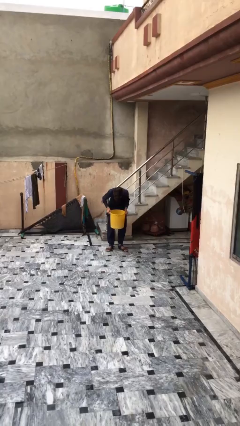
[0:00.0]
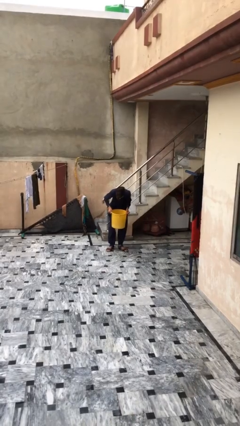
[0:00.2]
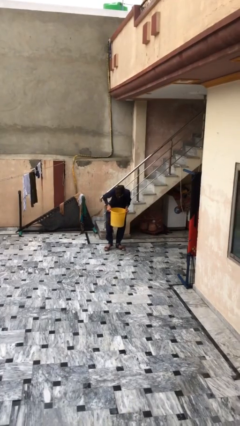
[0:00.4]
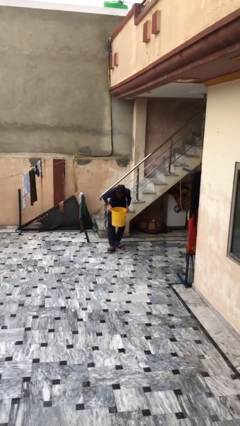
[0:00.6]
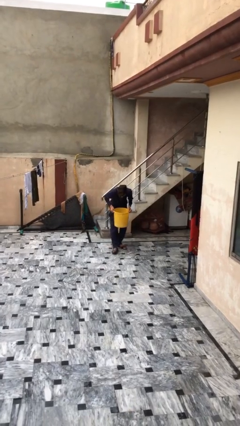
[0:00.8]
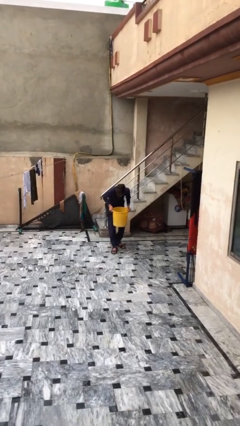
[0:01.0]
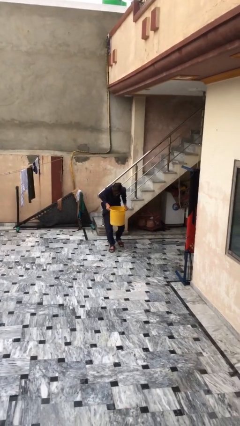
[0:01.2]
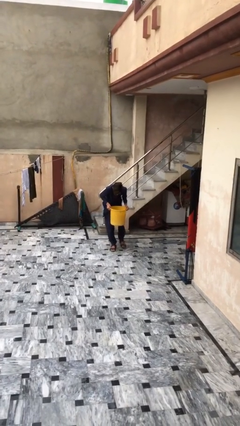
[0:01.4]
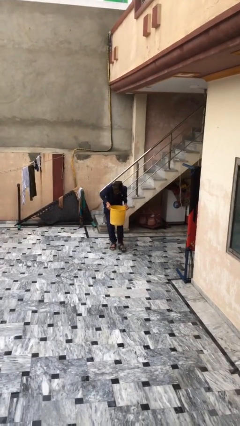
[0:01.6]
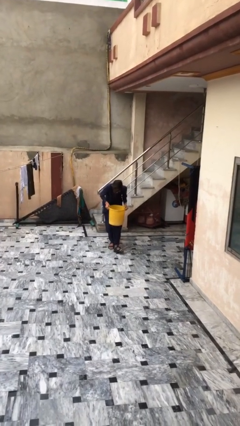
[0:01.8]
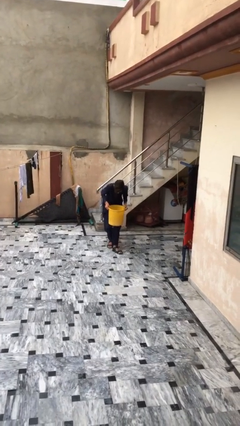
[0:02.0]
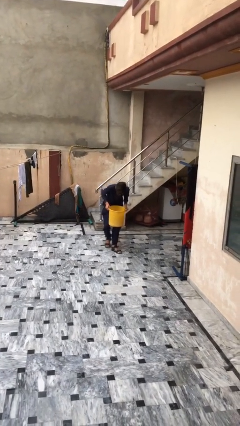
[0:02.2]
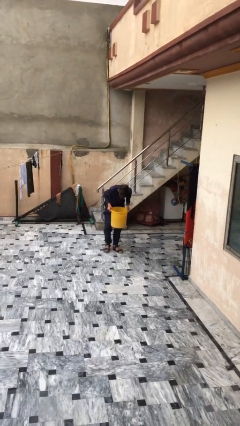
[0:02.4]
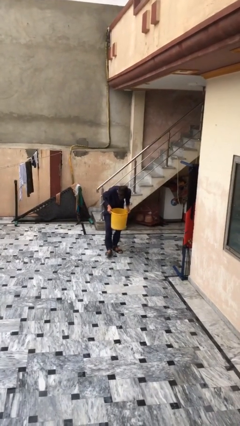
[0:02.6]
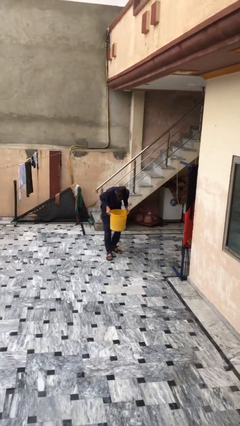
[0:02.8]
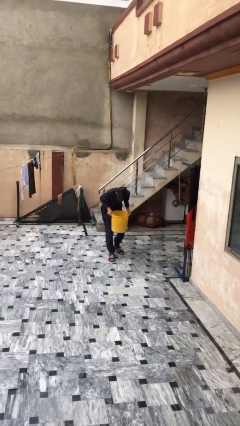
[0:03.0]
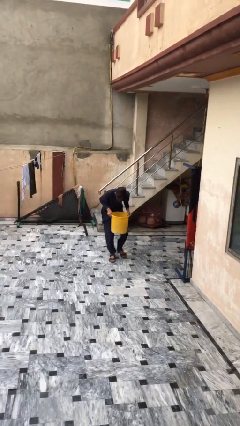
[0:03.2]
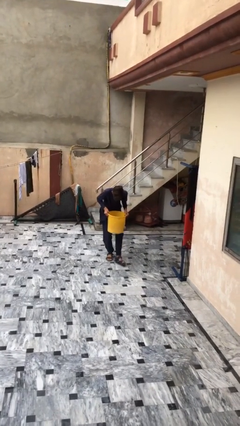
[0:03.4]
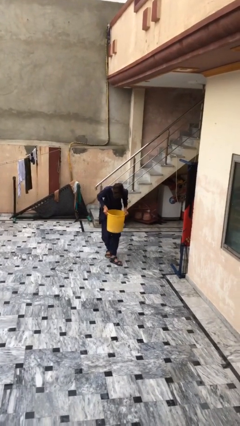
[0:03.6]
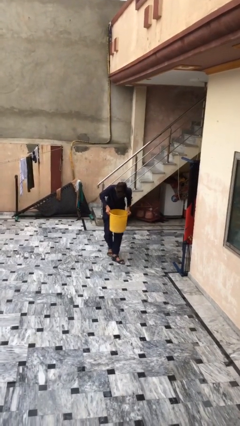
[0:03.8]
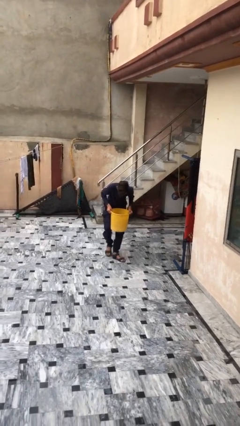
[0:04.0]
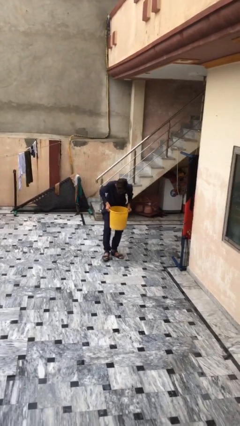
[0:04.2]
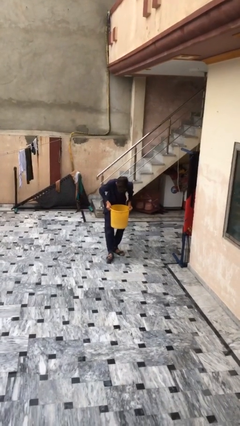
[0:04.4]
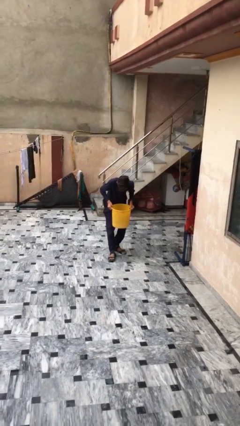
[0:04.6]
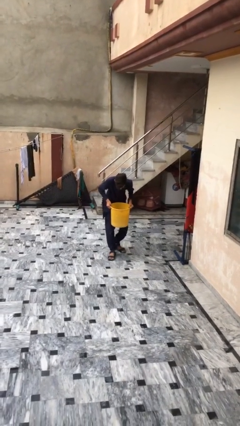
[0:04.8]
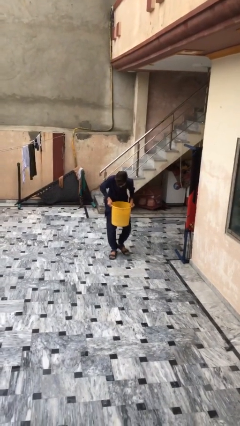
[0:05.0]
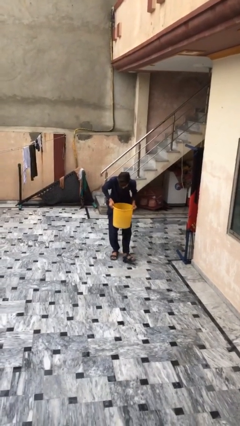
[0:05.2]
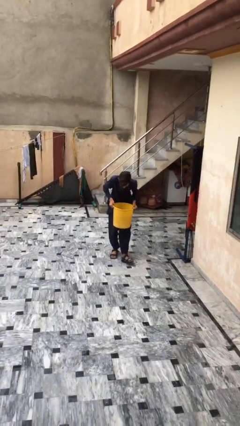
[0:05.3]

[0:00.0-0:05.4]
person carries heavy object

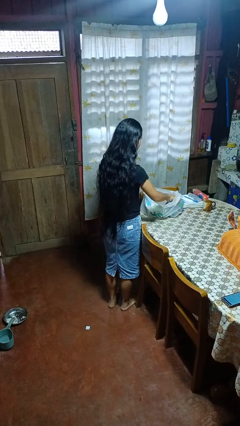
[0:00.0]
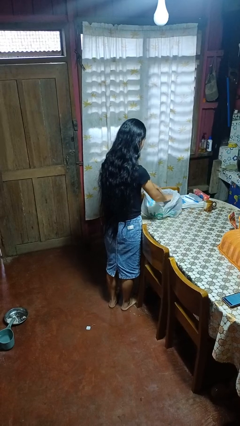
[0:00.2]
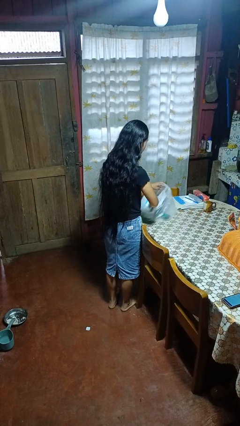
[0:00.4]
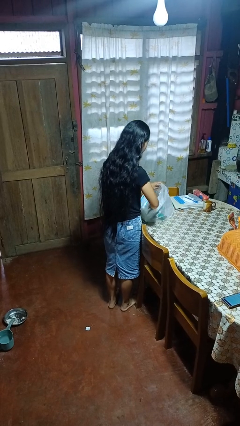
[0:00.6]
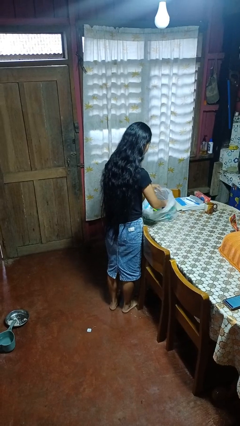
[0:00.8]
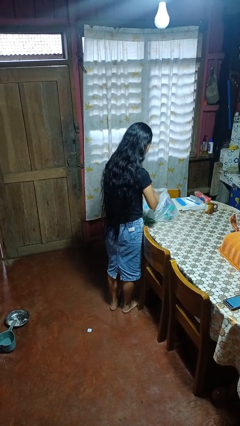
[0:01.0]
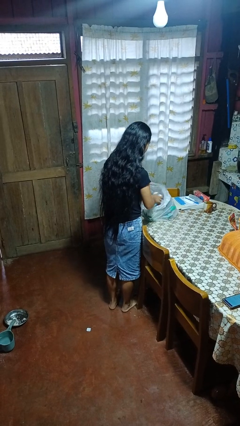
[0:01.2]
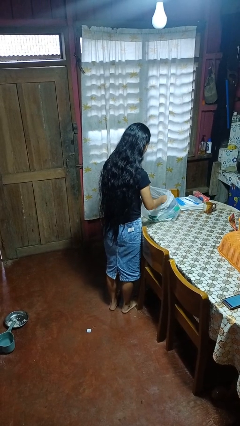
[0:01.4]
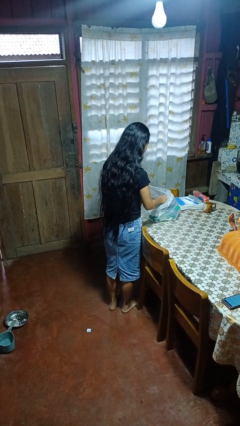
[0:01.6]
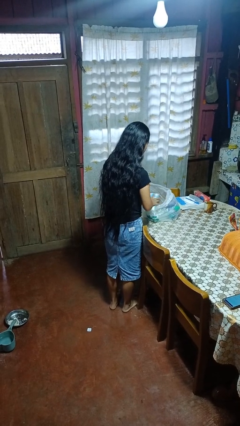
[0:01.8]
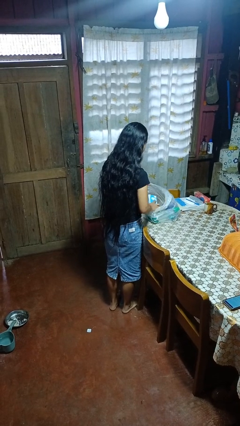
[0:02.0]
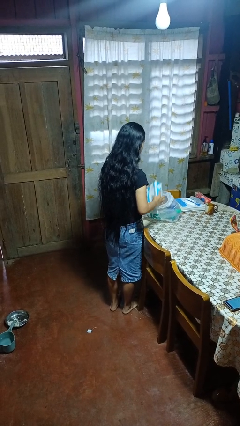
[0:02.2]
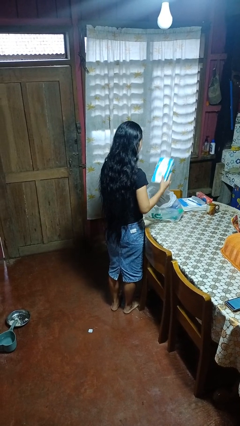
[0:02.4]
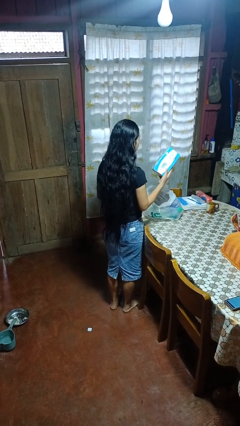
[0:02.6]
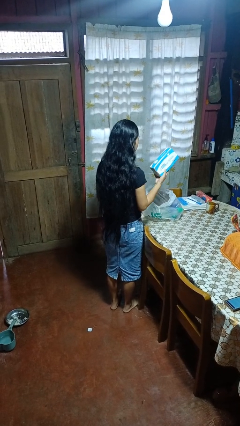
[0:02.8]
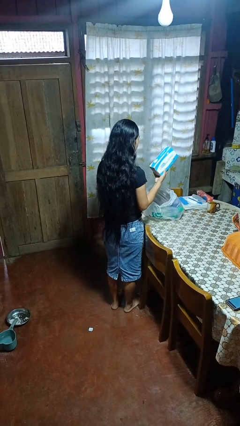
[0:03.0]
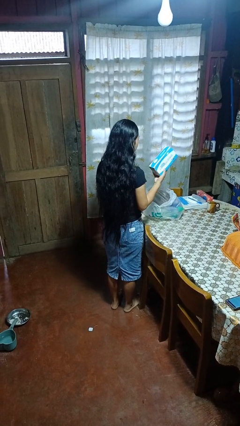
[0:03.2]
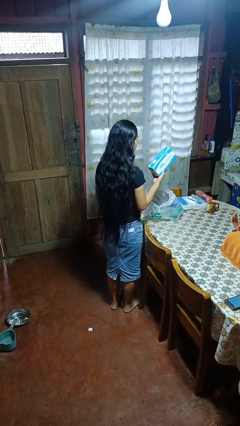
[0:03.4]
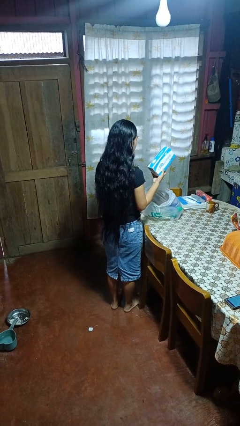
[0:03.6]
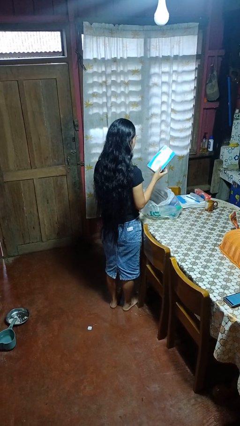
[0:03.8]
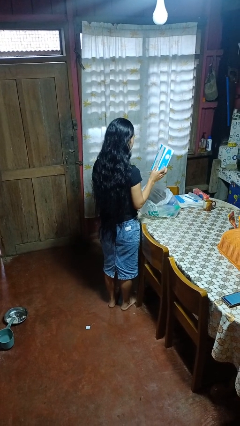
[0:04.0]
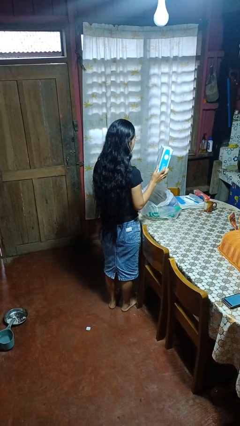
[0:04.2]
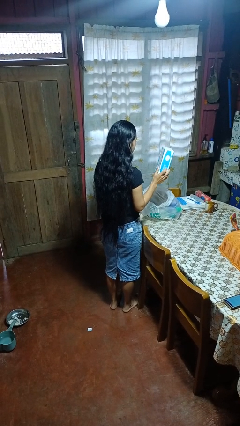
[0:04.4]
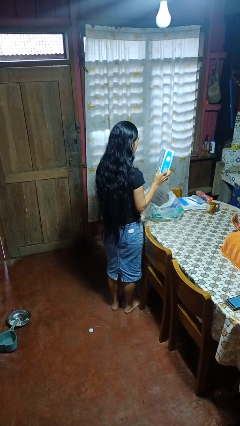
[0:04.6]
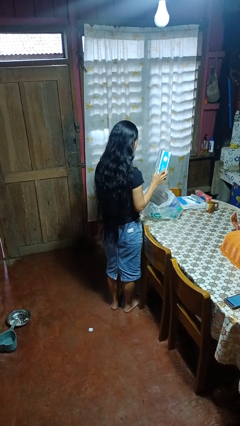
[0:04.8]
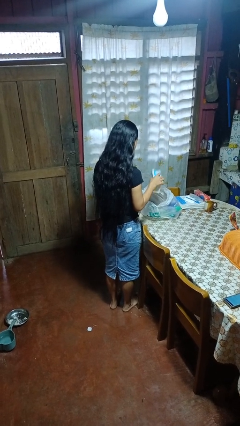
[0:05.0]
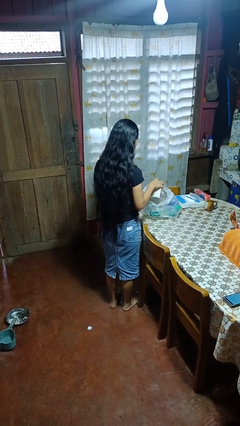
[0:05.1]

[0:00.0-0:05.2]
person takes object from bag

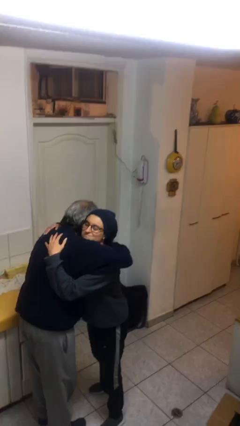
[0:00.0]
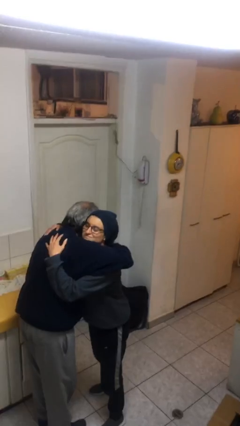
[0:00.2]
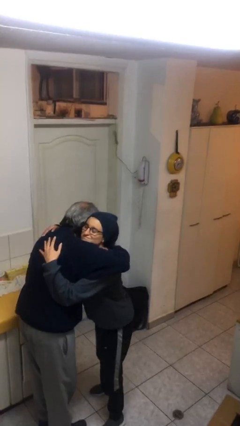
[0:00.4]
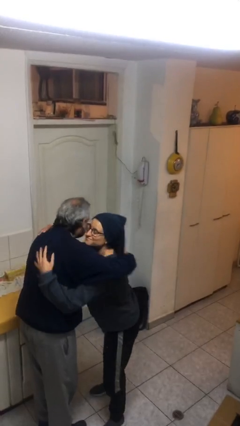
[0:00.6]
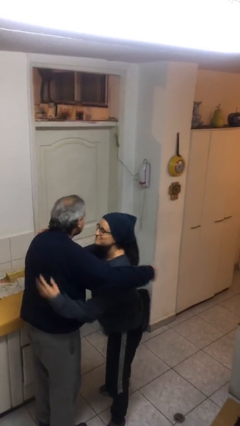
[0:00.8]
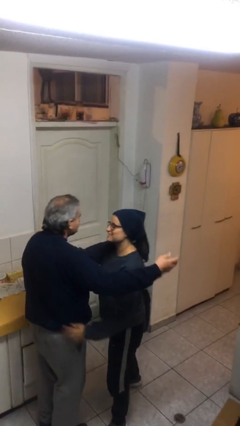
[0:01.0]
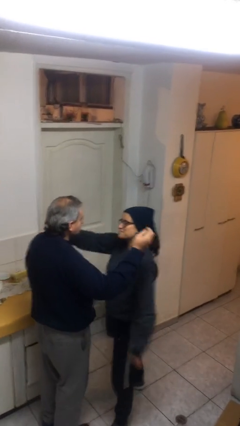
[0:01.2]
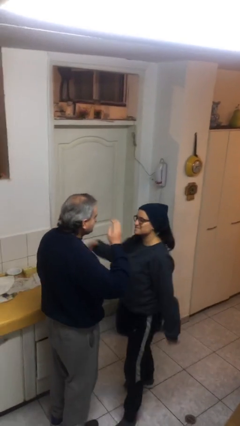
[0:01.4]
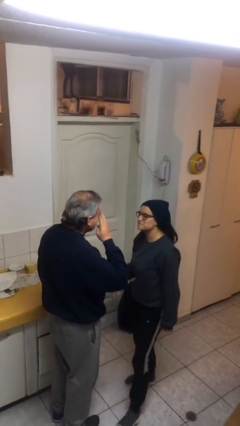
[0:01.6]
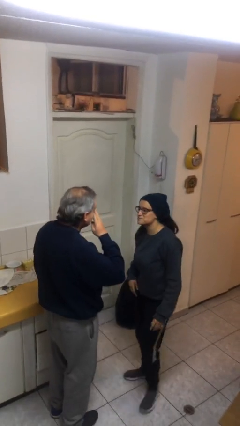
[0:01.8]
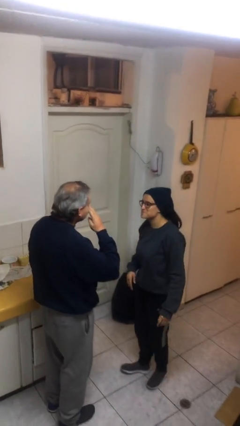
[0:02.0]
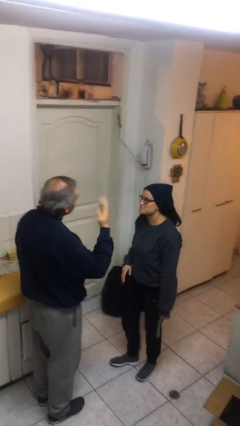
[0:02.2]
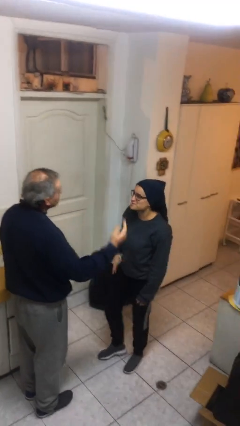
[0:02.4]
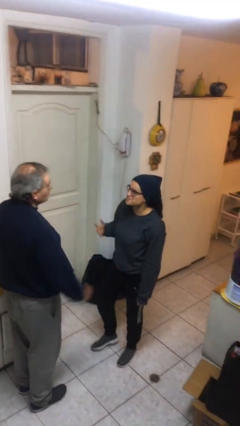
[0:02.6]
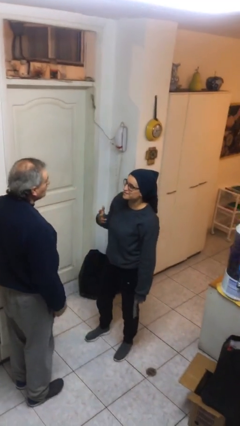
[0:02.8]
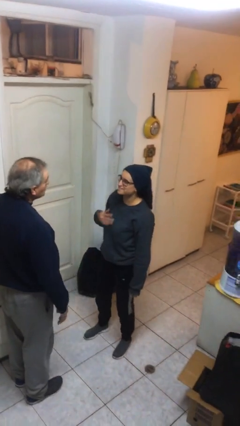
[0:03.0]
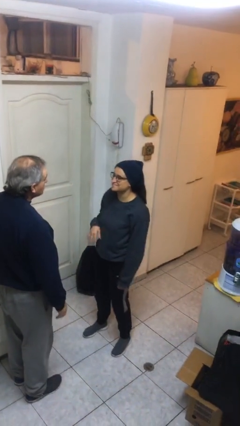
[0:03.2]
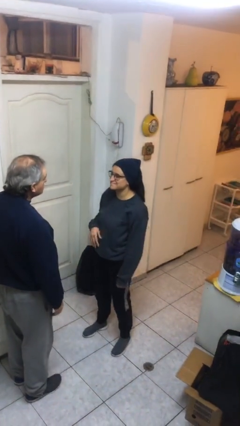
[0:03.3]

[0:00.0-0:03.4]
person embraces person

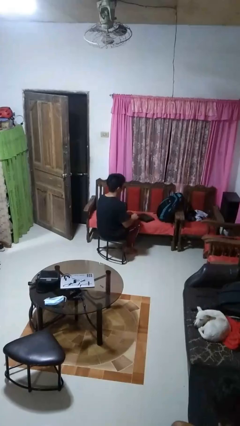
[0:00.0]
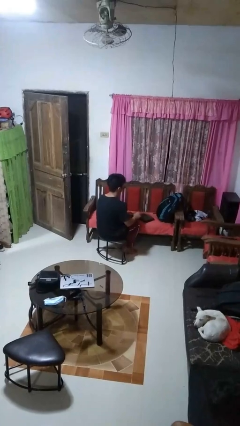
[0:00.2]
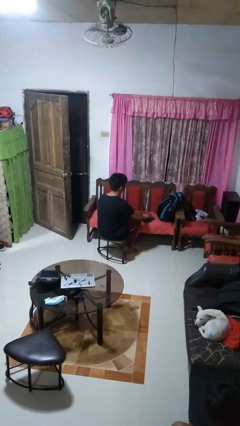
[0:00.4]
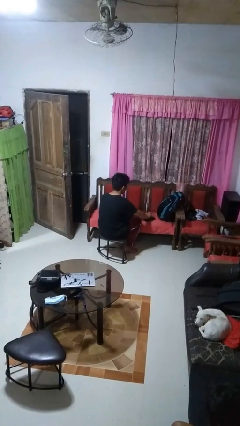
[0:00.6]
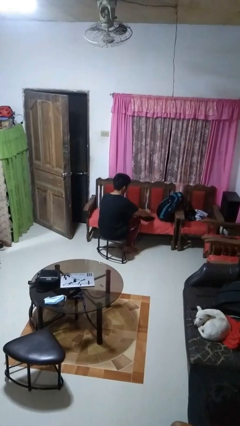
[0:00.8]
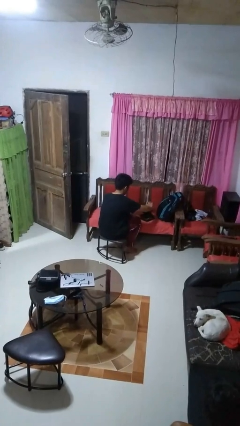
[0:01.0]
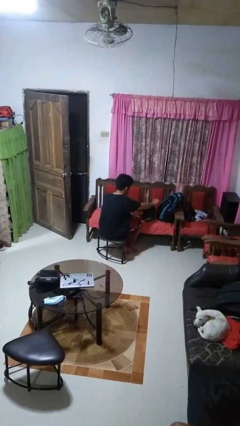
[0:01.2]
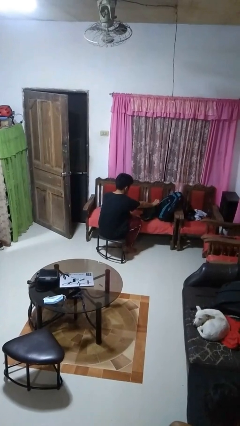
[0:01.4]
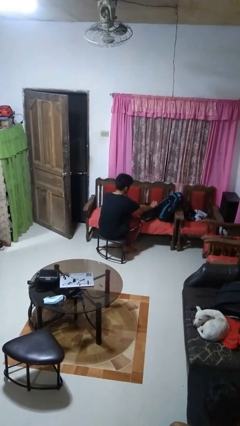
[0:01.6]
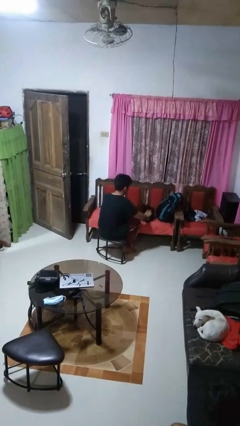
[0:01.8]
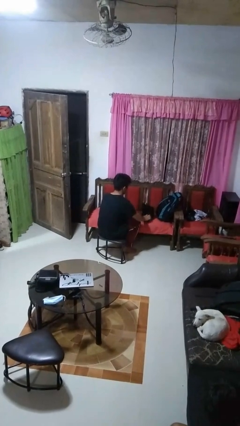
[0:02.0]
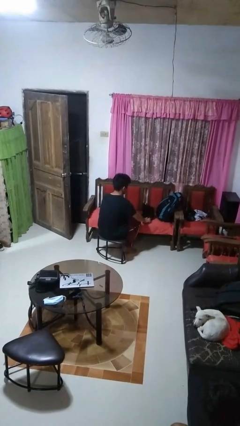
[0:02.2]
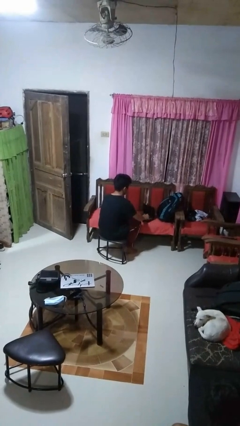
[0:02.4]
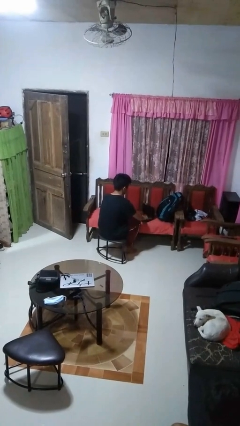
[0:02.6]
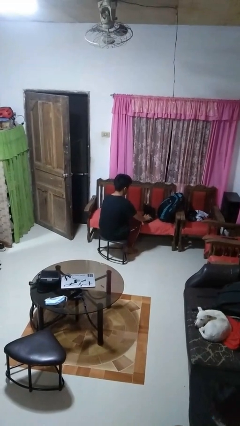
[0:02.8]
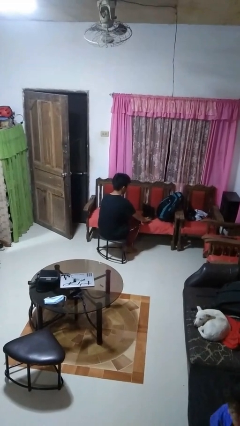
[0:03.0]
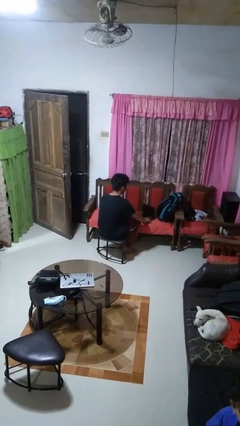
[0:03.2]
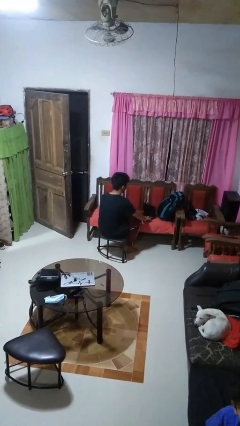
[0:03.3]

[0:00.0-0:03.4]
person opens laptop

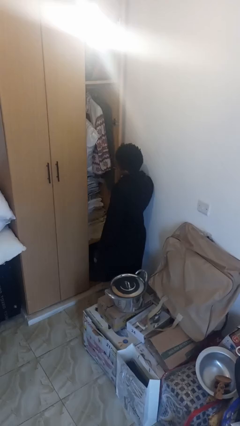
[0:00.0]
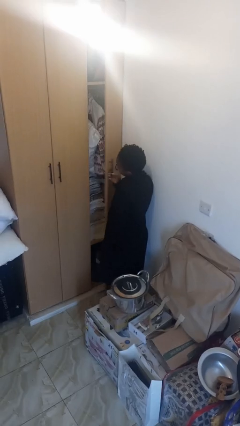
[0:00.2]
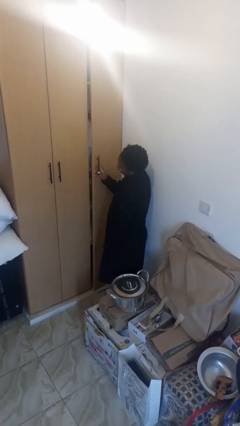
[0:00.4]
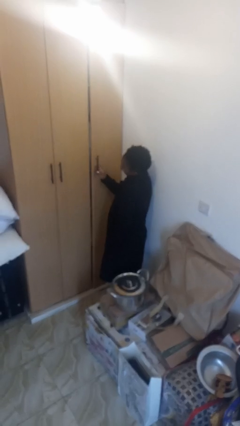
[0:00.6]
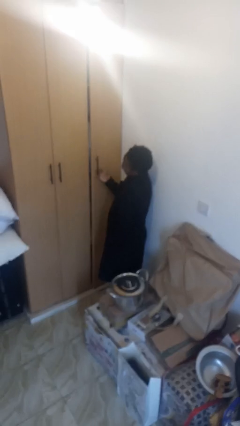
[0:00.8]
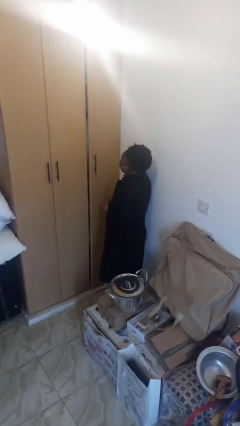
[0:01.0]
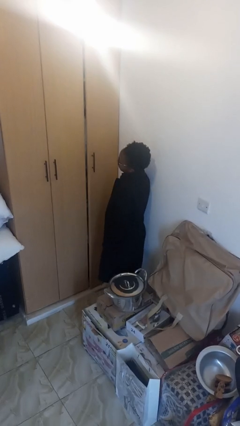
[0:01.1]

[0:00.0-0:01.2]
person closes closet door
